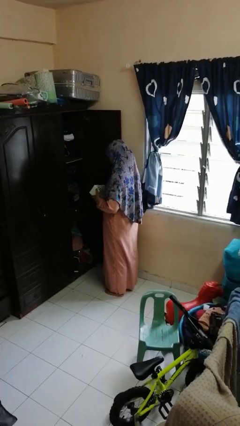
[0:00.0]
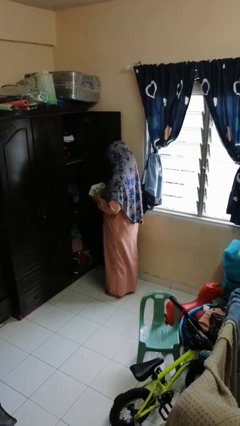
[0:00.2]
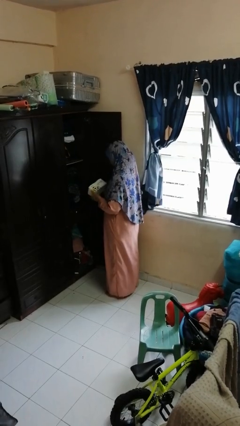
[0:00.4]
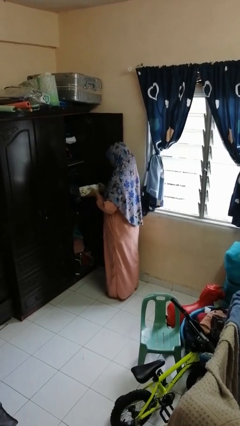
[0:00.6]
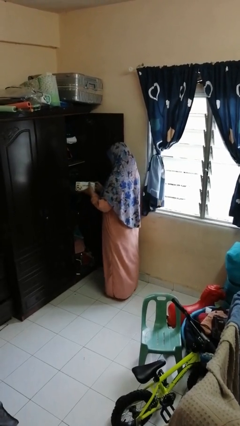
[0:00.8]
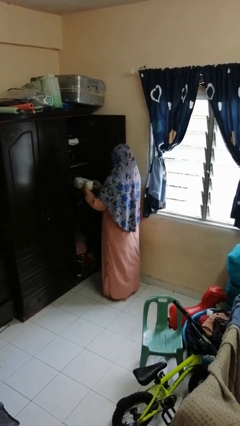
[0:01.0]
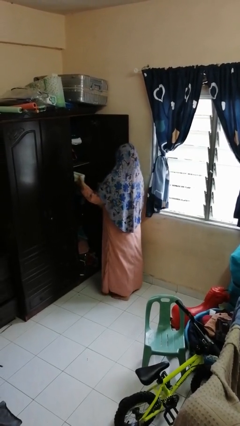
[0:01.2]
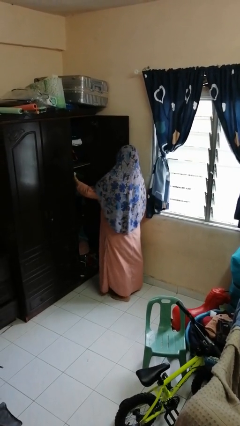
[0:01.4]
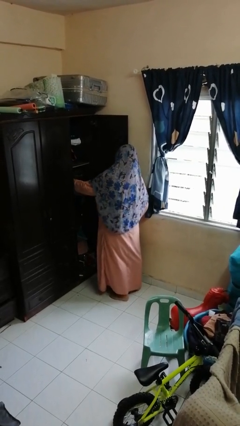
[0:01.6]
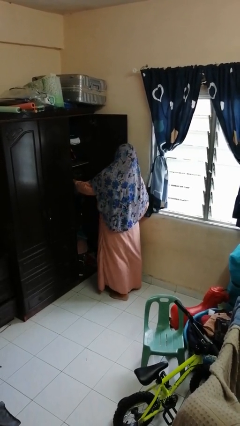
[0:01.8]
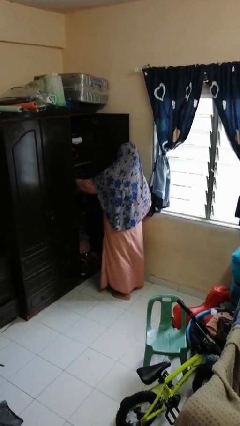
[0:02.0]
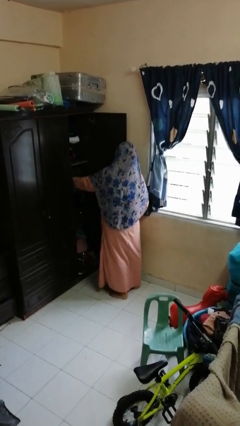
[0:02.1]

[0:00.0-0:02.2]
person puts down object into cabinet

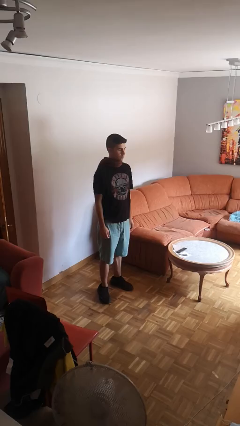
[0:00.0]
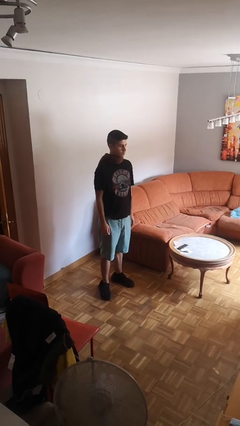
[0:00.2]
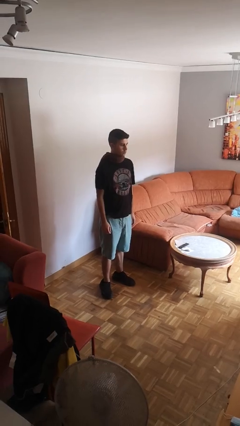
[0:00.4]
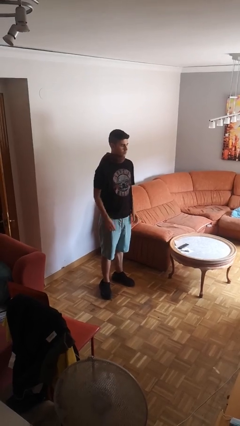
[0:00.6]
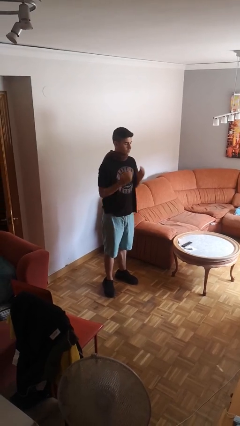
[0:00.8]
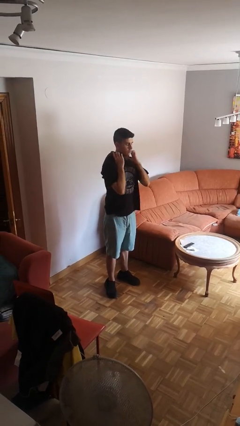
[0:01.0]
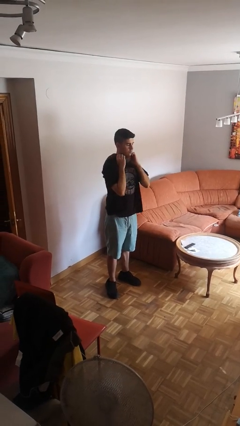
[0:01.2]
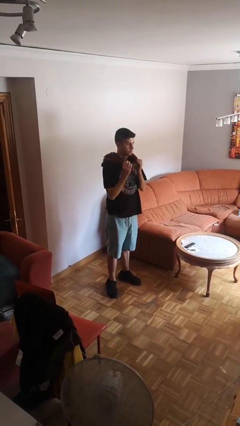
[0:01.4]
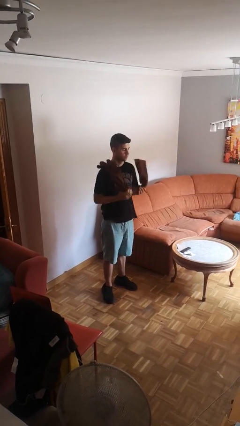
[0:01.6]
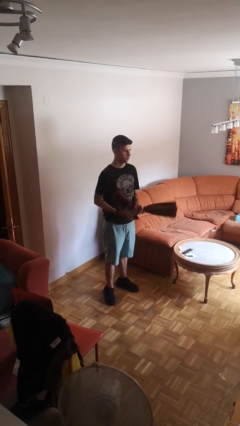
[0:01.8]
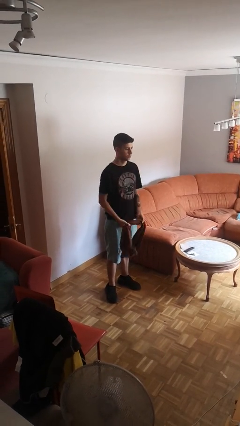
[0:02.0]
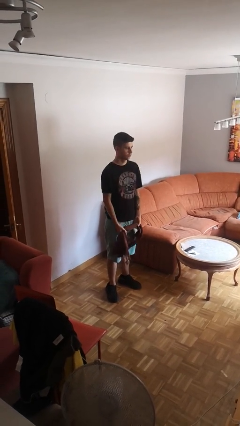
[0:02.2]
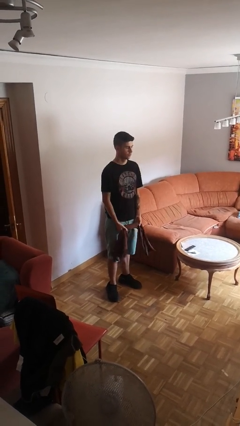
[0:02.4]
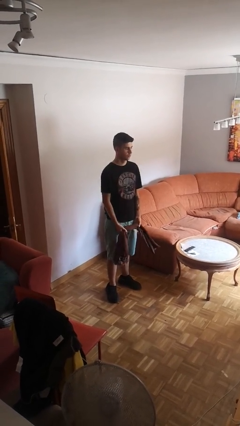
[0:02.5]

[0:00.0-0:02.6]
person takes off scarf

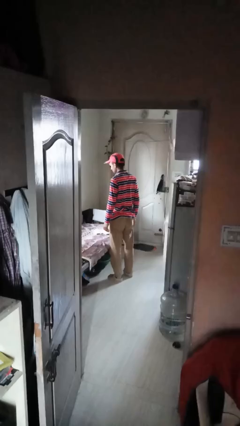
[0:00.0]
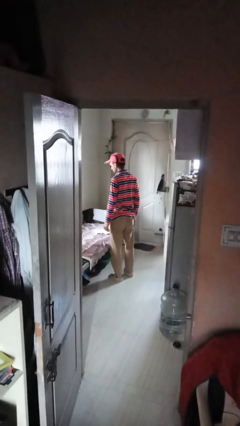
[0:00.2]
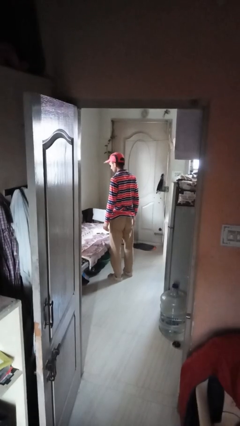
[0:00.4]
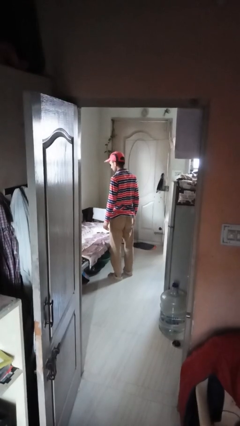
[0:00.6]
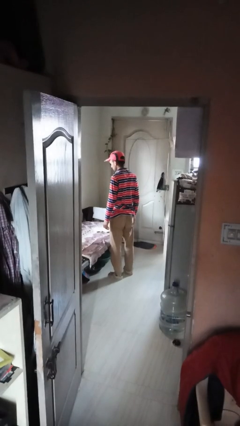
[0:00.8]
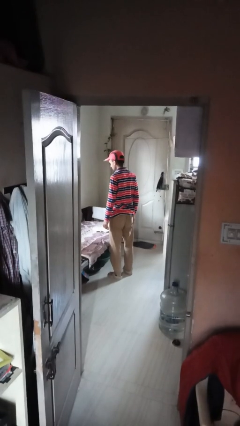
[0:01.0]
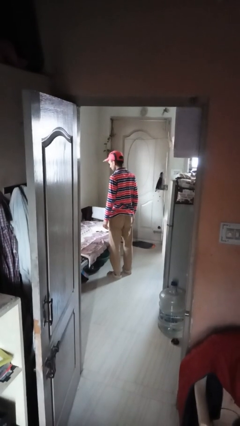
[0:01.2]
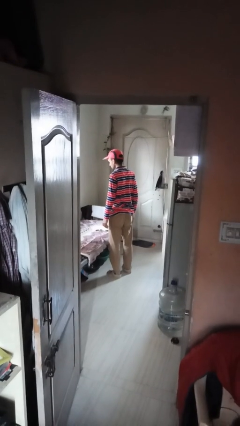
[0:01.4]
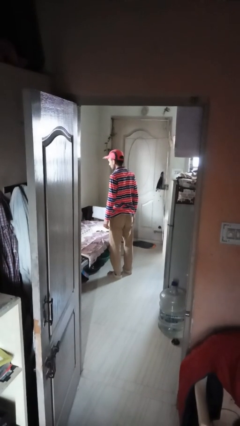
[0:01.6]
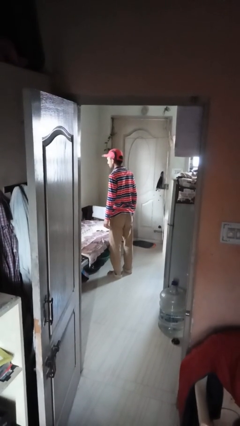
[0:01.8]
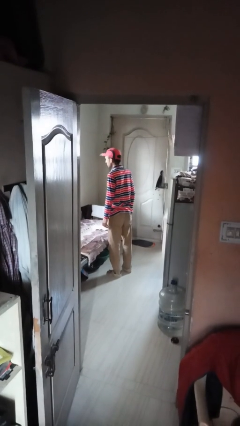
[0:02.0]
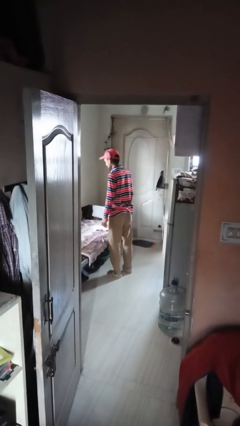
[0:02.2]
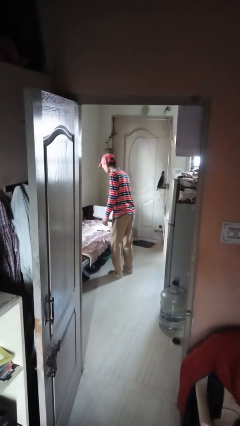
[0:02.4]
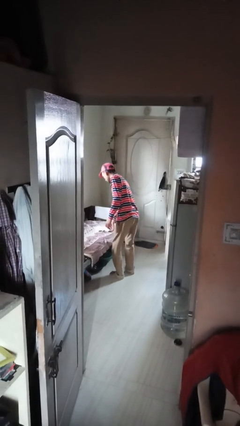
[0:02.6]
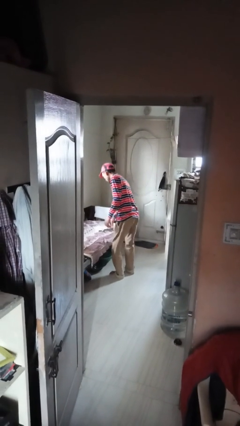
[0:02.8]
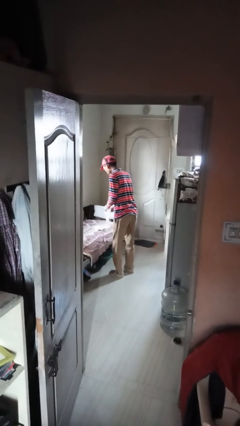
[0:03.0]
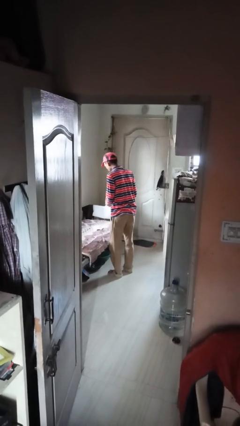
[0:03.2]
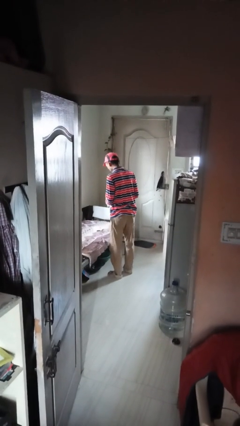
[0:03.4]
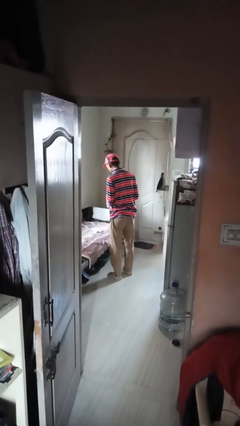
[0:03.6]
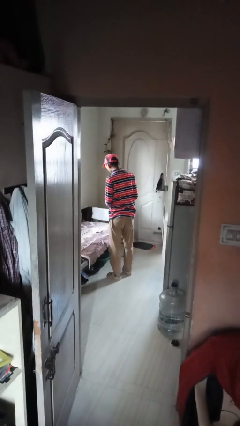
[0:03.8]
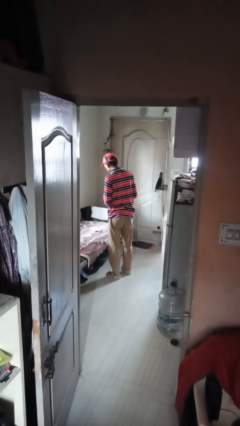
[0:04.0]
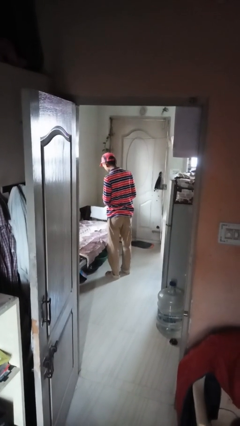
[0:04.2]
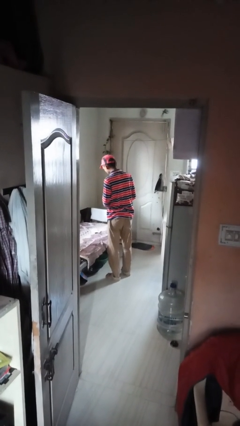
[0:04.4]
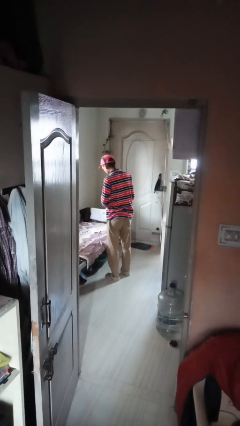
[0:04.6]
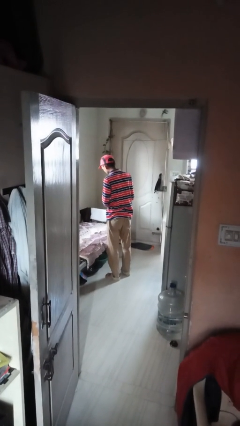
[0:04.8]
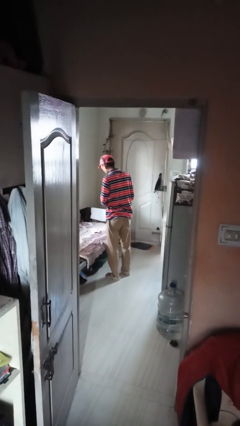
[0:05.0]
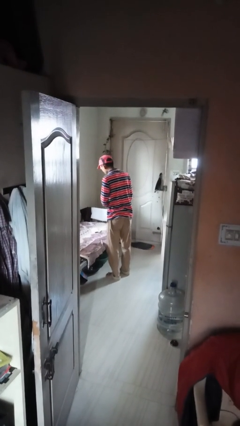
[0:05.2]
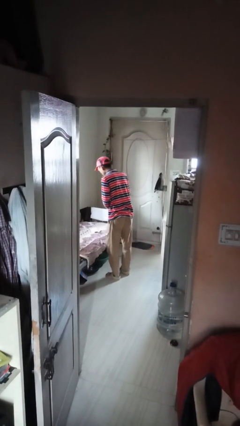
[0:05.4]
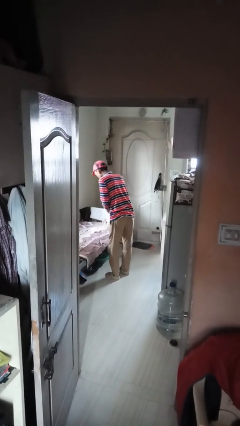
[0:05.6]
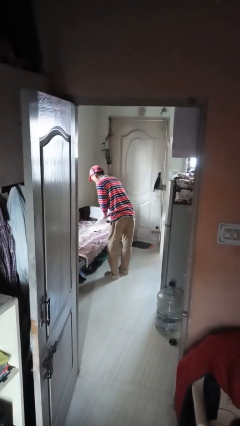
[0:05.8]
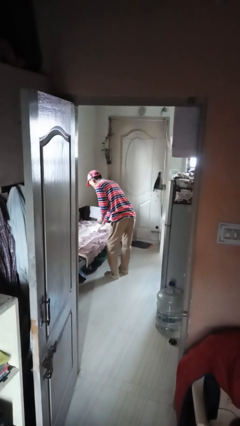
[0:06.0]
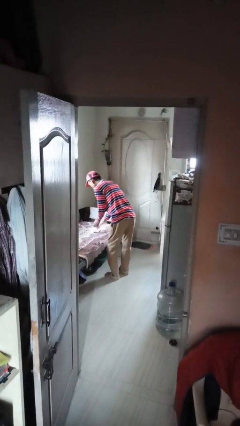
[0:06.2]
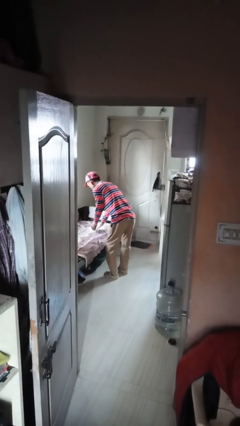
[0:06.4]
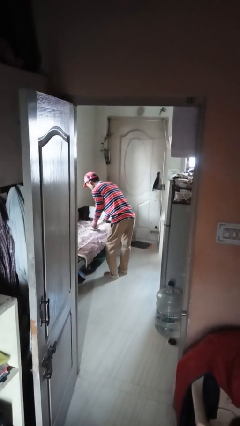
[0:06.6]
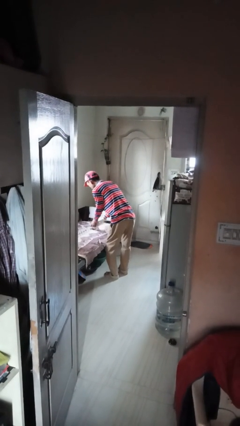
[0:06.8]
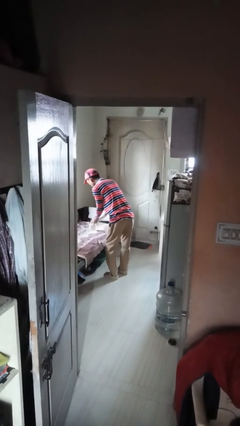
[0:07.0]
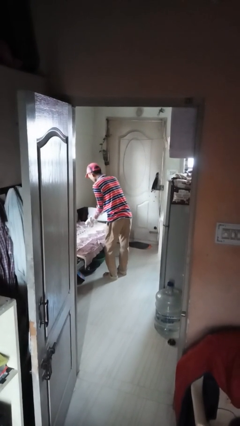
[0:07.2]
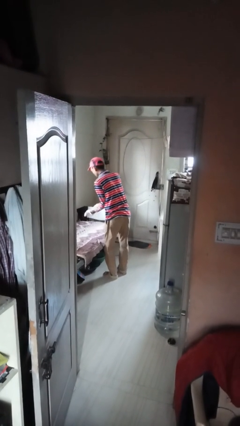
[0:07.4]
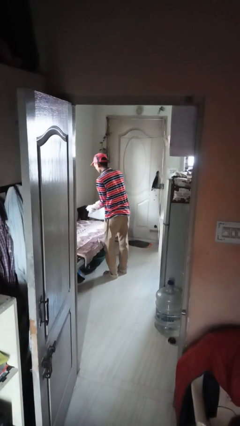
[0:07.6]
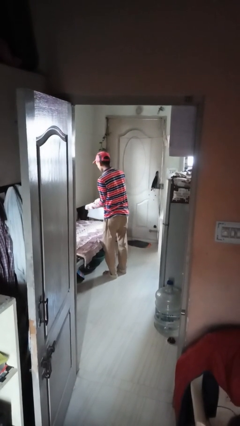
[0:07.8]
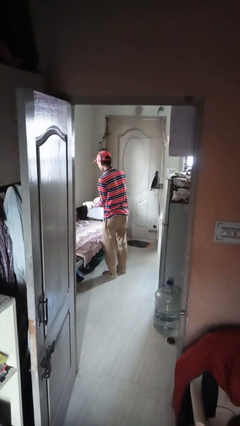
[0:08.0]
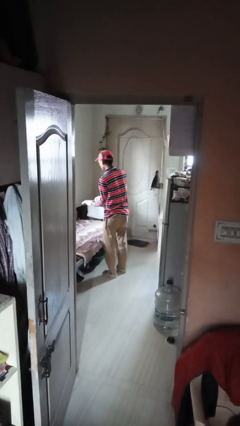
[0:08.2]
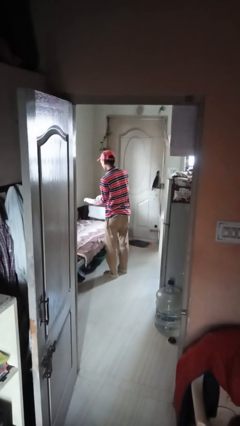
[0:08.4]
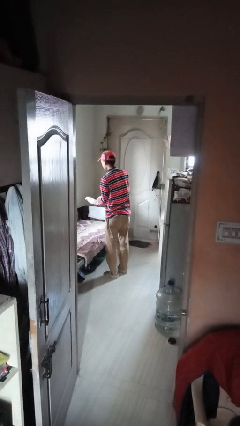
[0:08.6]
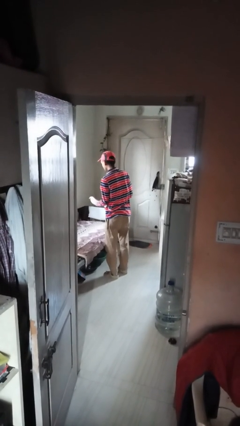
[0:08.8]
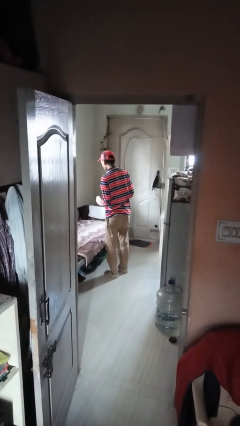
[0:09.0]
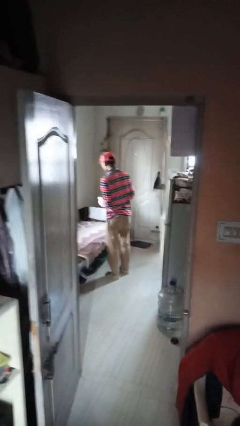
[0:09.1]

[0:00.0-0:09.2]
person puts on gloves

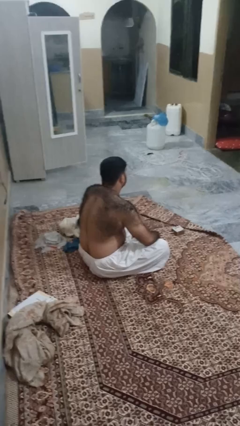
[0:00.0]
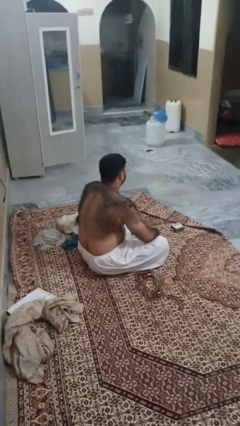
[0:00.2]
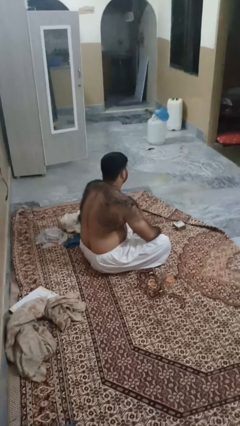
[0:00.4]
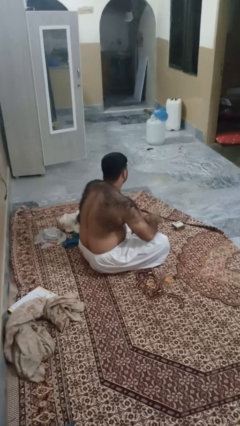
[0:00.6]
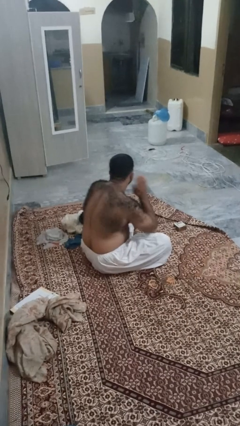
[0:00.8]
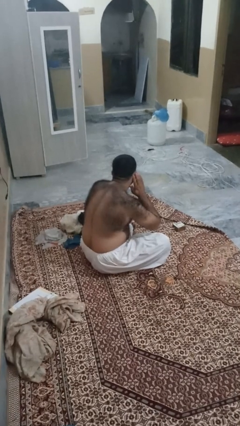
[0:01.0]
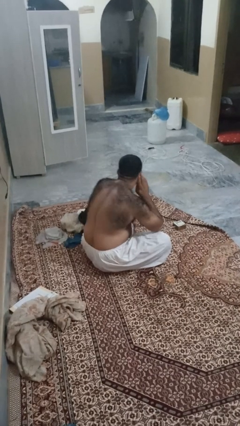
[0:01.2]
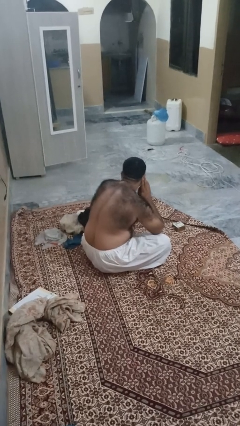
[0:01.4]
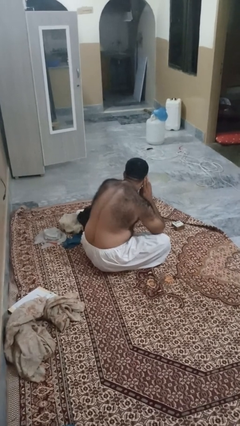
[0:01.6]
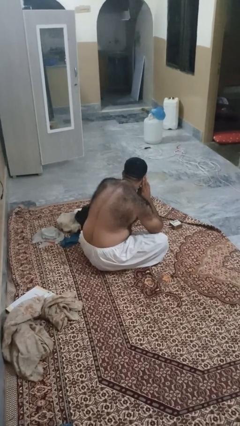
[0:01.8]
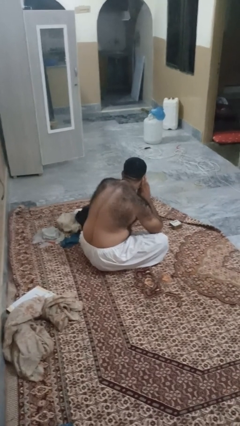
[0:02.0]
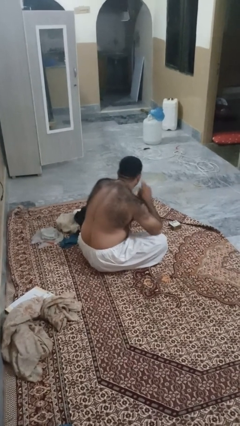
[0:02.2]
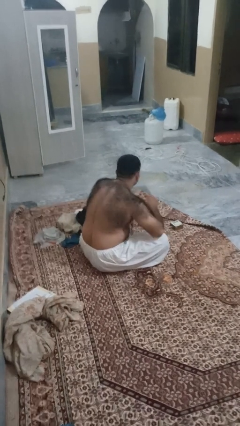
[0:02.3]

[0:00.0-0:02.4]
person gestures listen closely

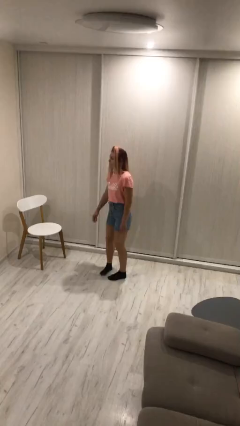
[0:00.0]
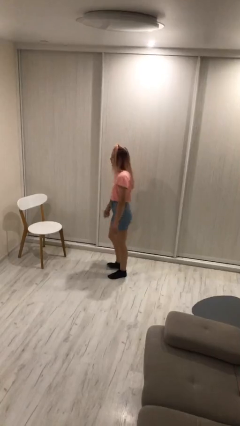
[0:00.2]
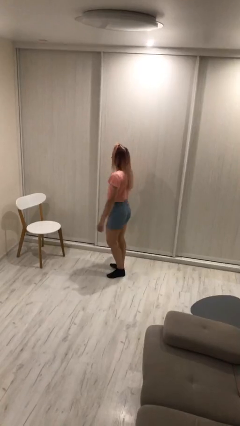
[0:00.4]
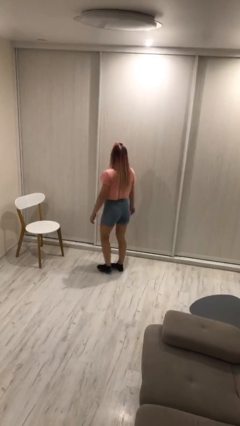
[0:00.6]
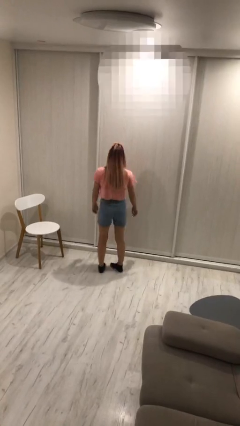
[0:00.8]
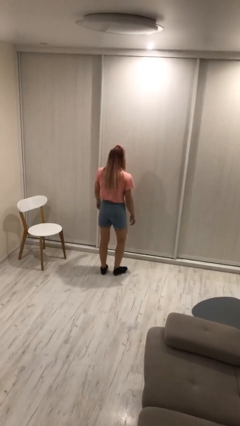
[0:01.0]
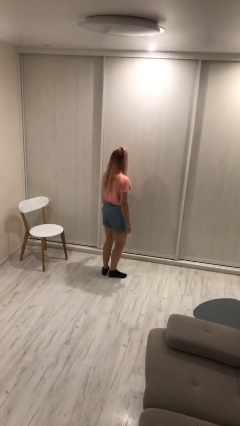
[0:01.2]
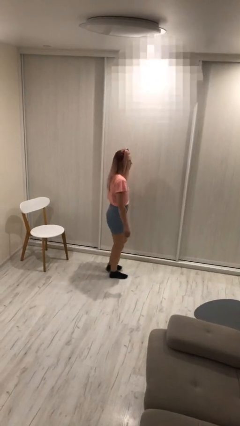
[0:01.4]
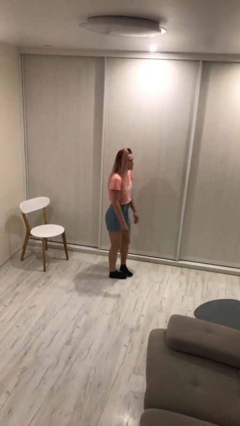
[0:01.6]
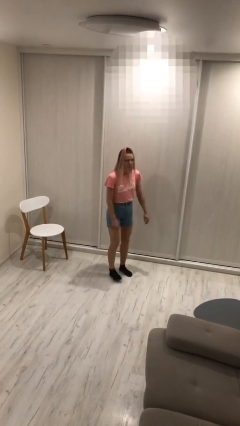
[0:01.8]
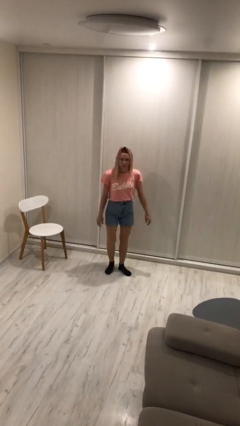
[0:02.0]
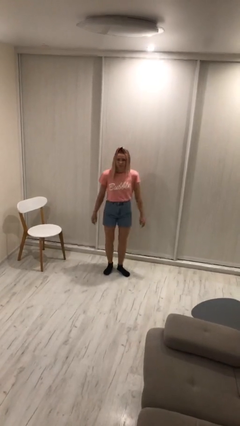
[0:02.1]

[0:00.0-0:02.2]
person twirls
